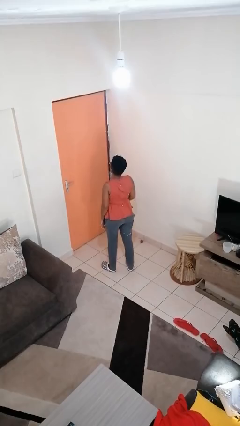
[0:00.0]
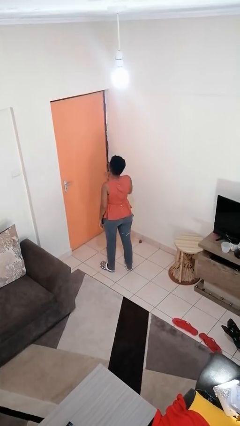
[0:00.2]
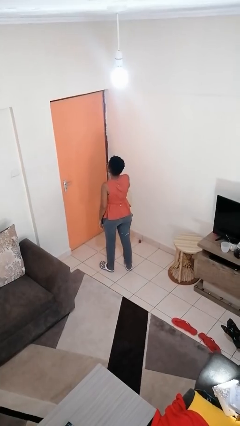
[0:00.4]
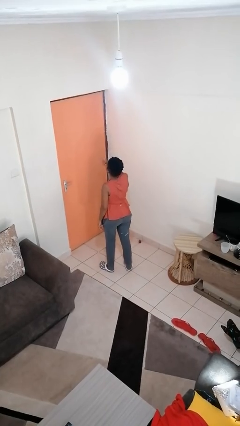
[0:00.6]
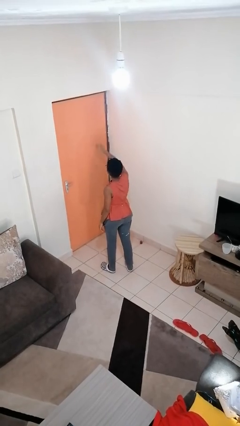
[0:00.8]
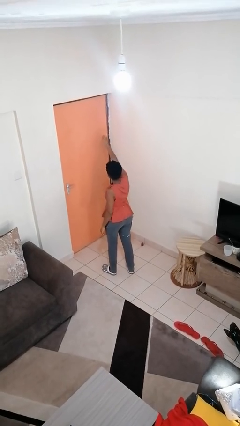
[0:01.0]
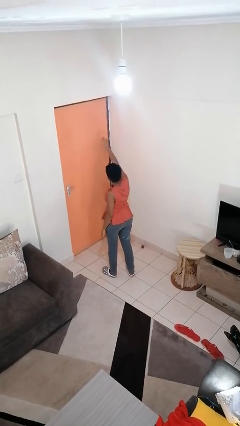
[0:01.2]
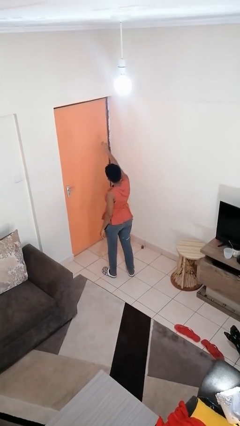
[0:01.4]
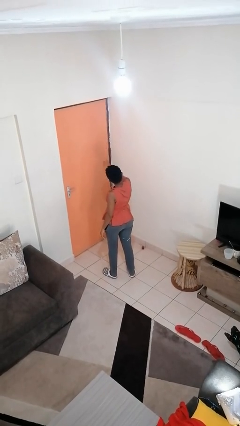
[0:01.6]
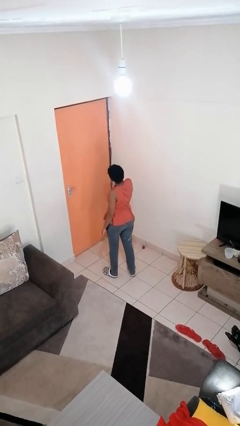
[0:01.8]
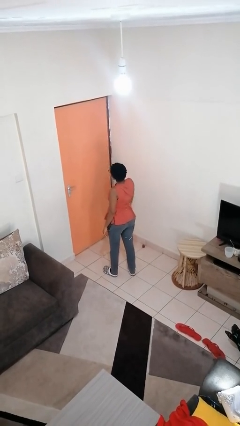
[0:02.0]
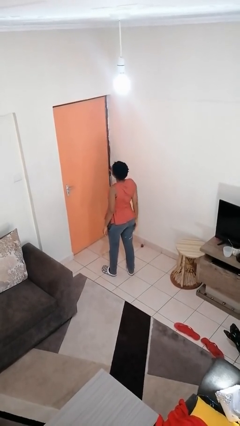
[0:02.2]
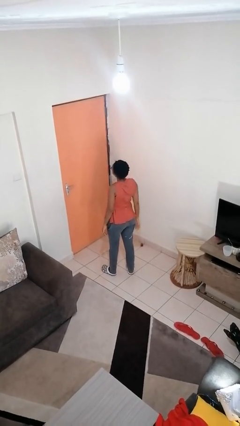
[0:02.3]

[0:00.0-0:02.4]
person gestures blow kiss

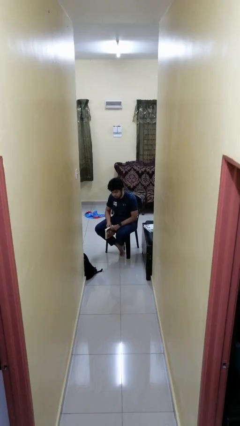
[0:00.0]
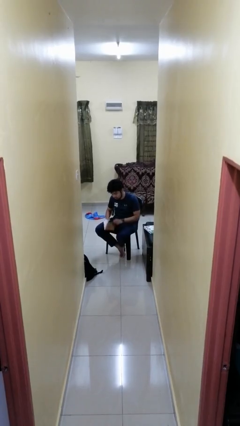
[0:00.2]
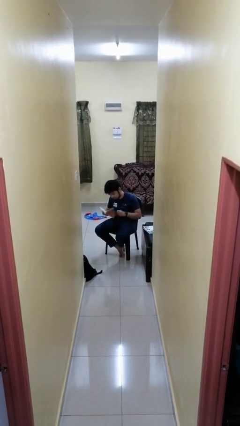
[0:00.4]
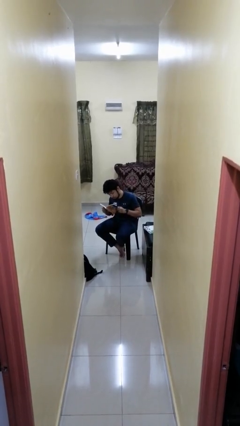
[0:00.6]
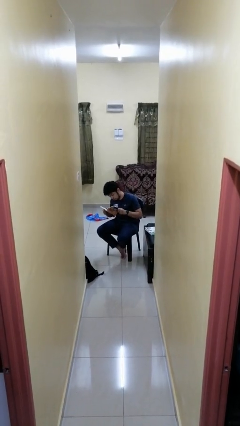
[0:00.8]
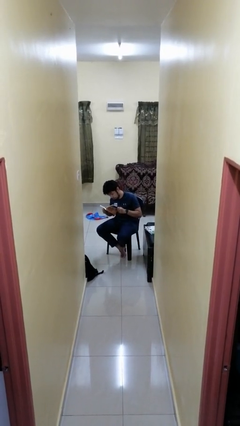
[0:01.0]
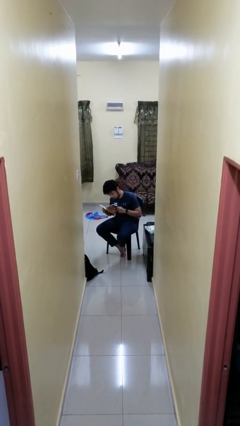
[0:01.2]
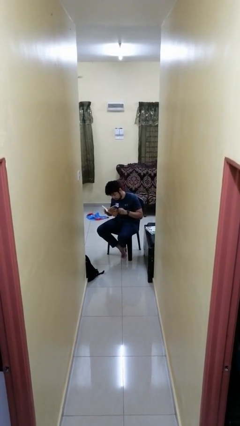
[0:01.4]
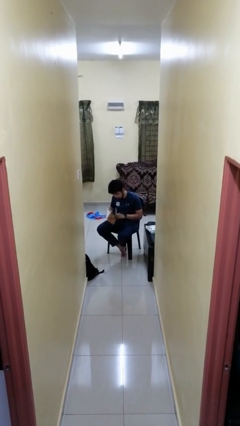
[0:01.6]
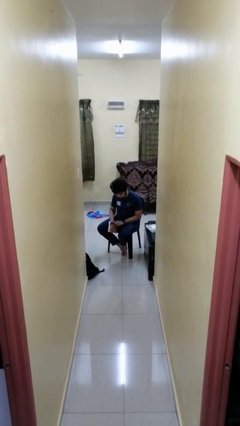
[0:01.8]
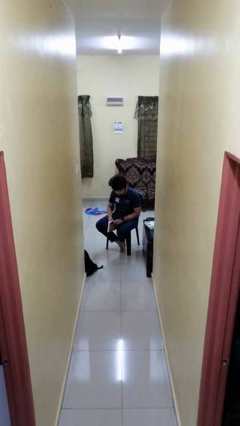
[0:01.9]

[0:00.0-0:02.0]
person reads book

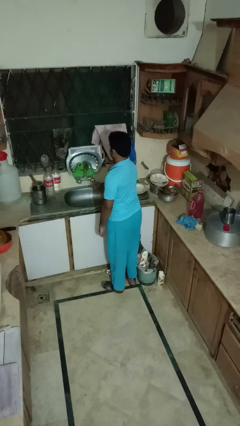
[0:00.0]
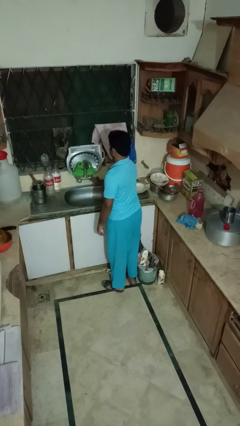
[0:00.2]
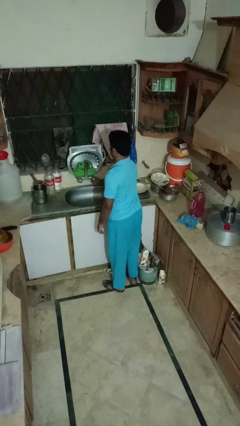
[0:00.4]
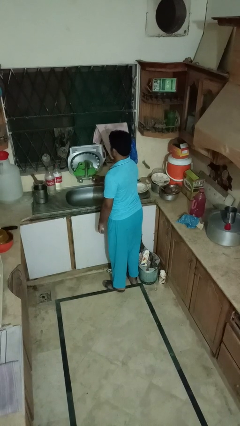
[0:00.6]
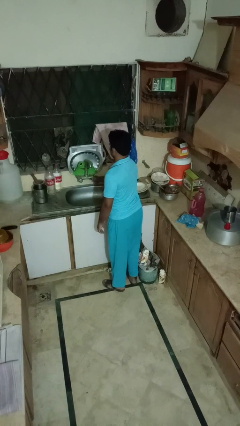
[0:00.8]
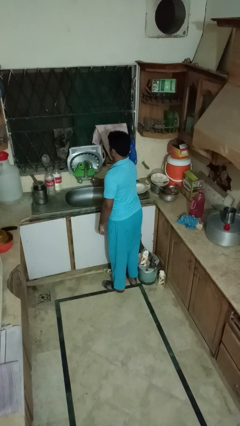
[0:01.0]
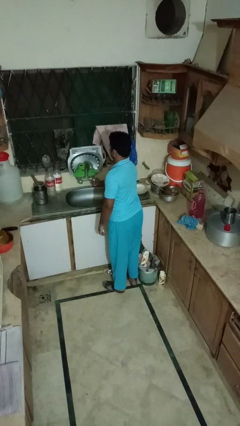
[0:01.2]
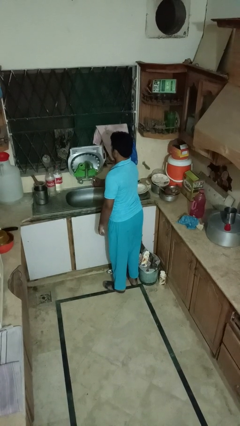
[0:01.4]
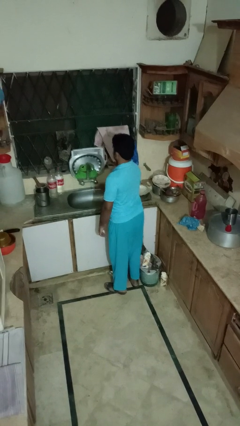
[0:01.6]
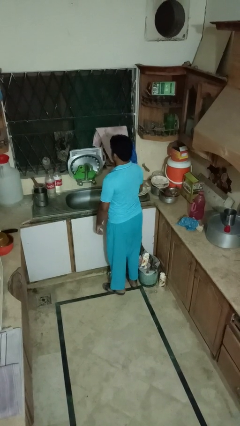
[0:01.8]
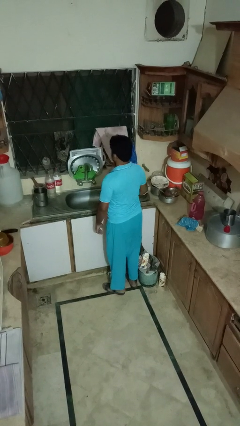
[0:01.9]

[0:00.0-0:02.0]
person turns off faucet

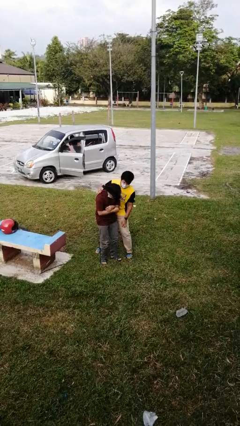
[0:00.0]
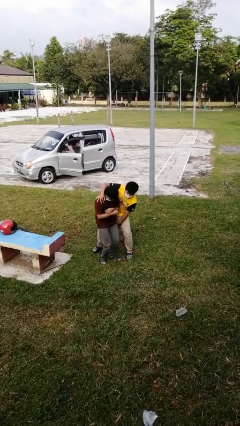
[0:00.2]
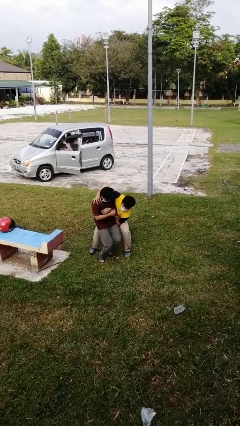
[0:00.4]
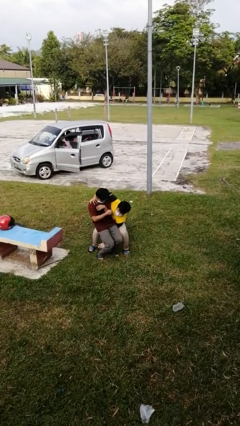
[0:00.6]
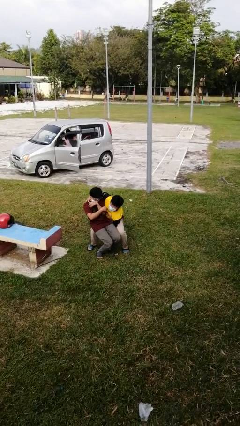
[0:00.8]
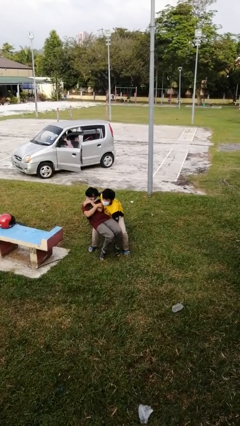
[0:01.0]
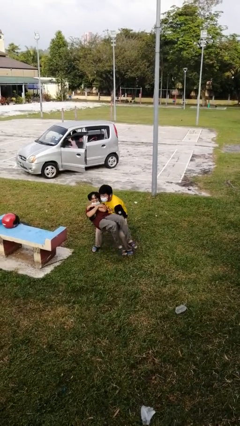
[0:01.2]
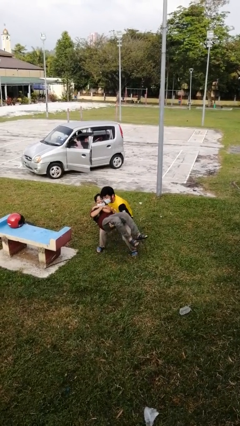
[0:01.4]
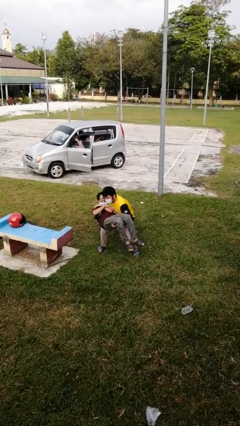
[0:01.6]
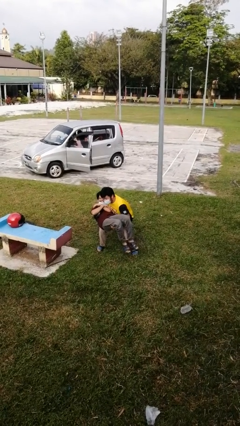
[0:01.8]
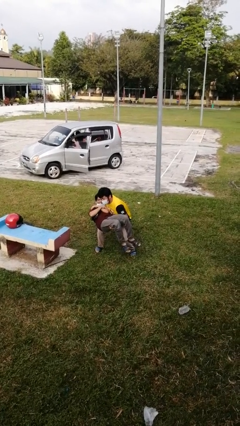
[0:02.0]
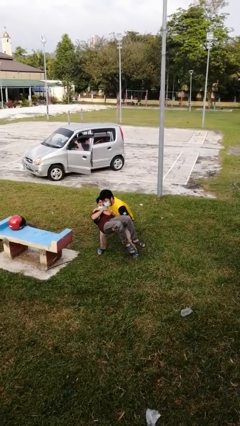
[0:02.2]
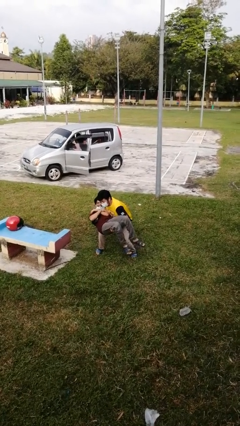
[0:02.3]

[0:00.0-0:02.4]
person picks up person

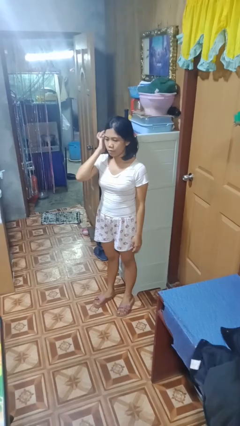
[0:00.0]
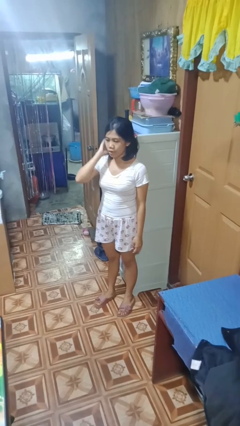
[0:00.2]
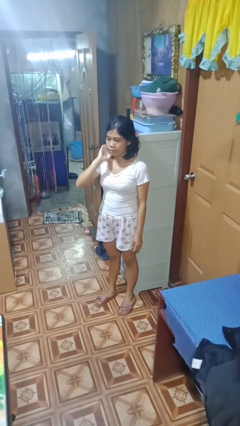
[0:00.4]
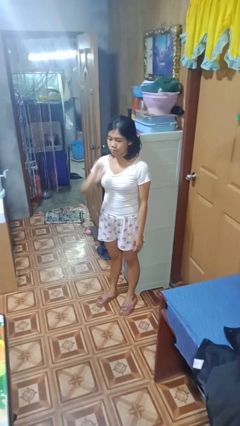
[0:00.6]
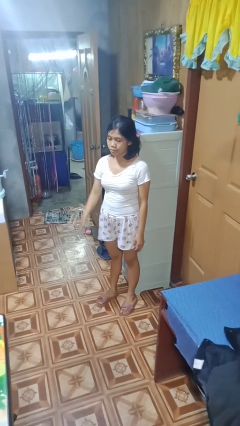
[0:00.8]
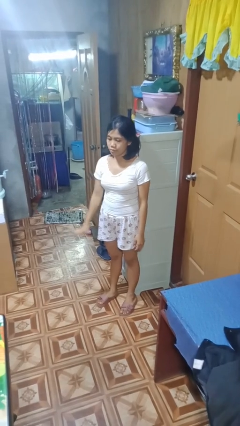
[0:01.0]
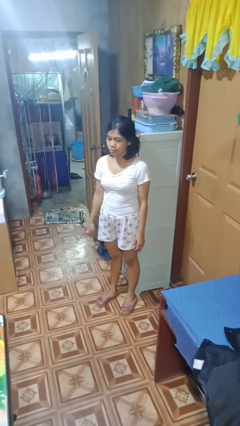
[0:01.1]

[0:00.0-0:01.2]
person strokes hair

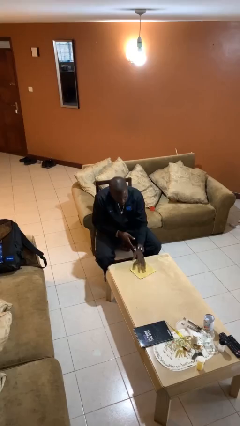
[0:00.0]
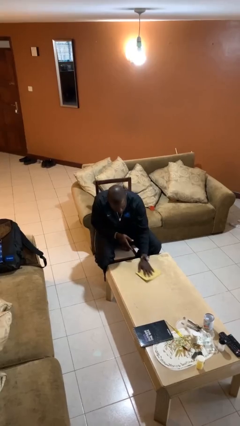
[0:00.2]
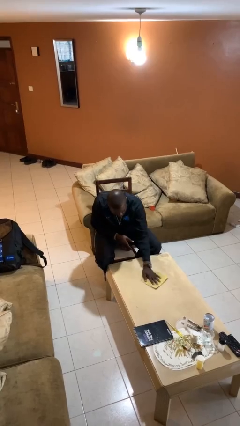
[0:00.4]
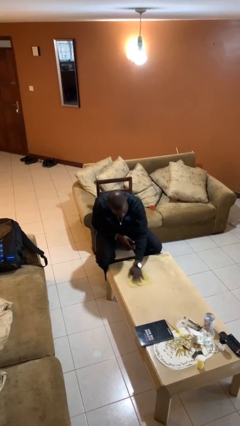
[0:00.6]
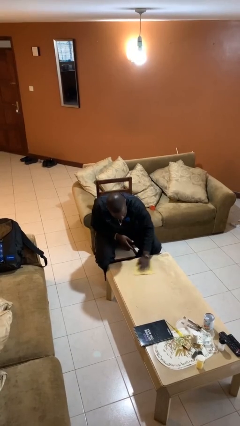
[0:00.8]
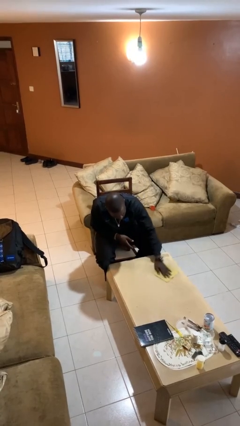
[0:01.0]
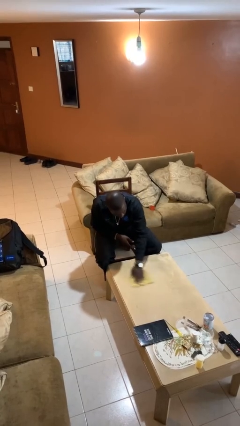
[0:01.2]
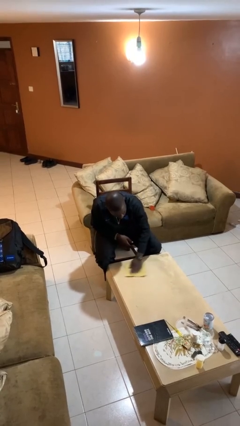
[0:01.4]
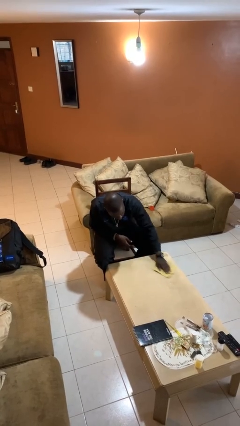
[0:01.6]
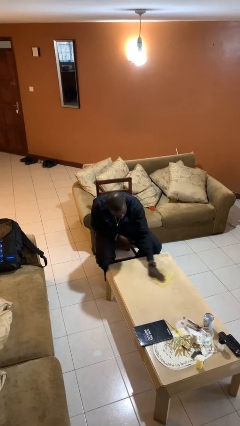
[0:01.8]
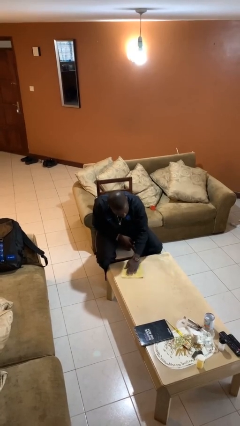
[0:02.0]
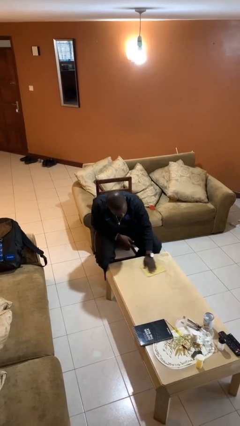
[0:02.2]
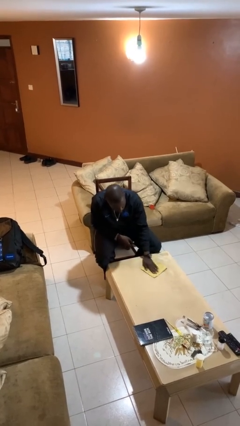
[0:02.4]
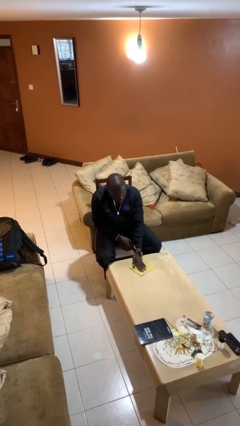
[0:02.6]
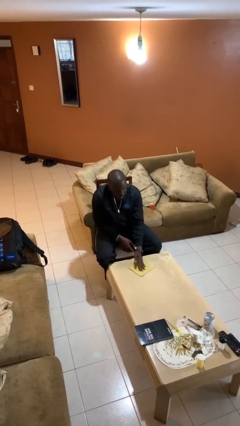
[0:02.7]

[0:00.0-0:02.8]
person cleans table with rag

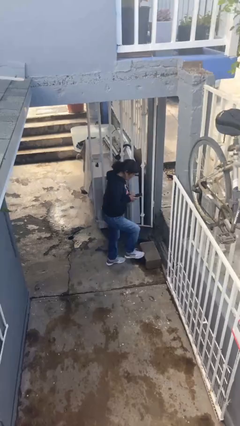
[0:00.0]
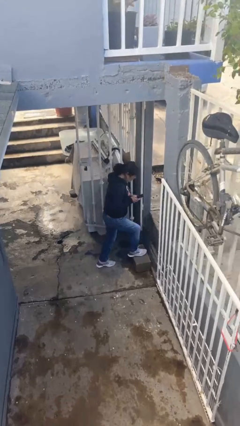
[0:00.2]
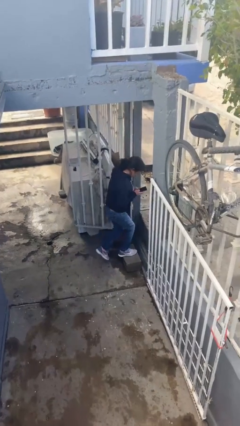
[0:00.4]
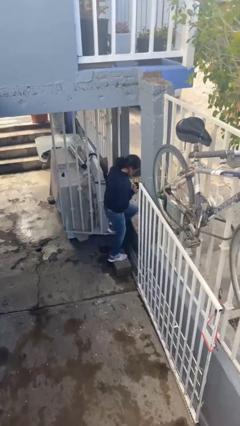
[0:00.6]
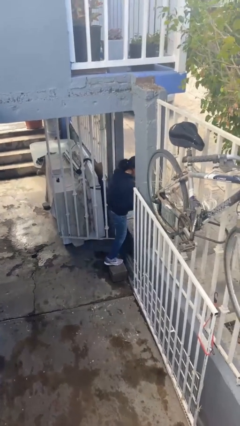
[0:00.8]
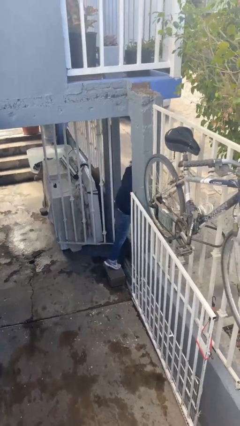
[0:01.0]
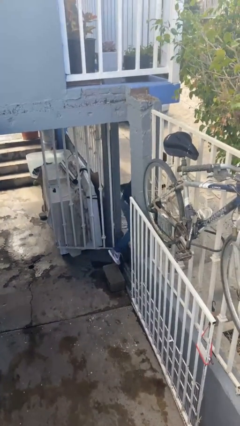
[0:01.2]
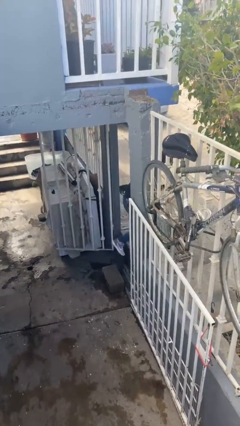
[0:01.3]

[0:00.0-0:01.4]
person exits scene through structure

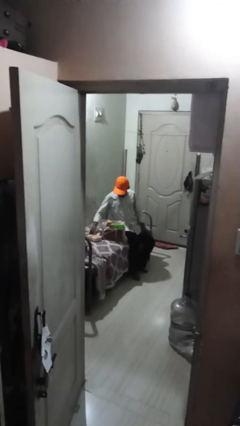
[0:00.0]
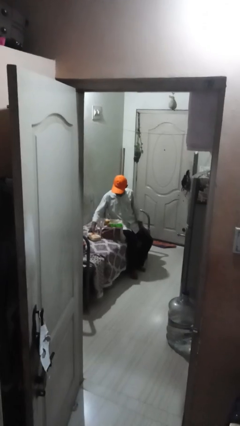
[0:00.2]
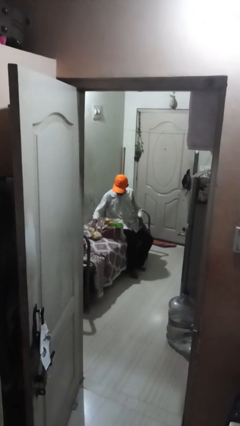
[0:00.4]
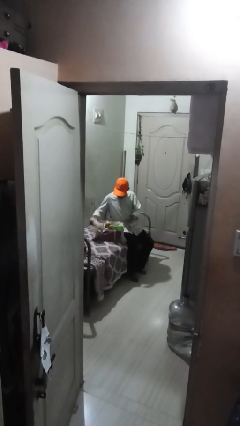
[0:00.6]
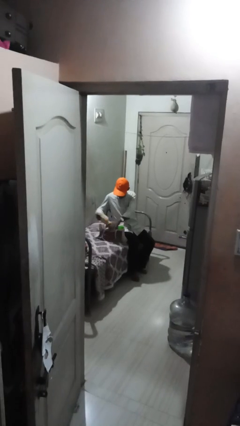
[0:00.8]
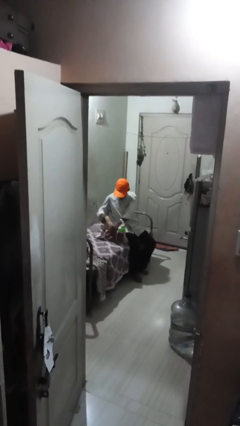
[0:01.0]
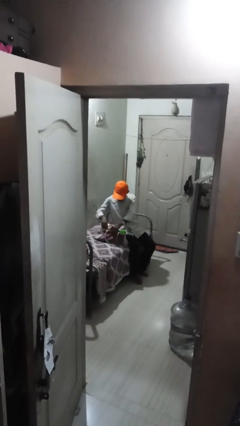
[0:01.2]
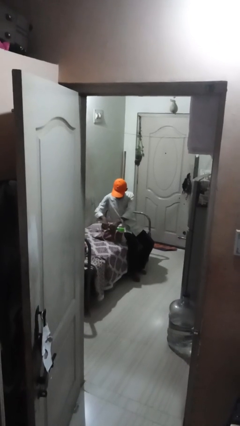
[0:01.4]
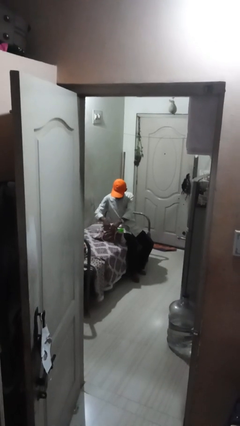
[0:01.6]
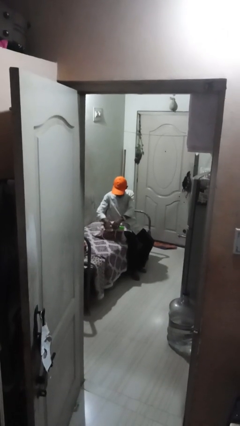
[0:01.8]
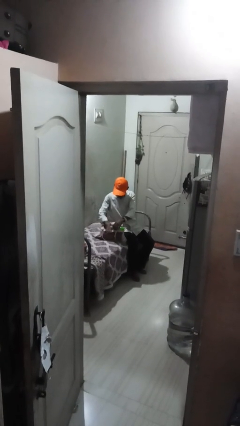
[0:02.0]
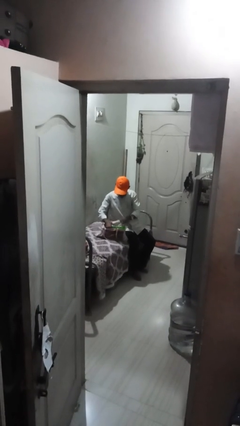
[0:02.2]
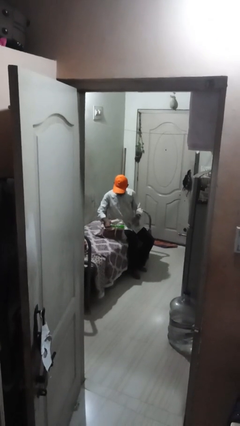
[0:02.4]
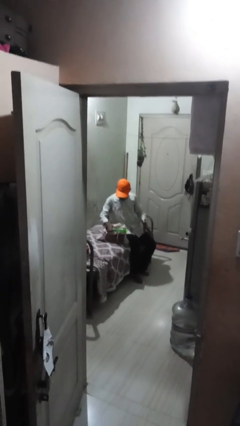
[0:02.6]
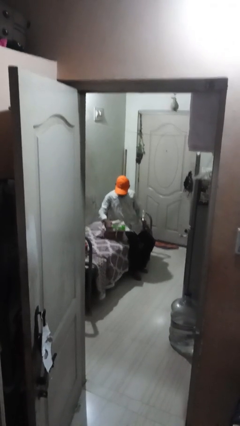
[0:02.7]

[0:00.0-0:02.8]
person puts object into bag
